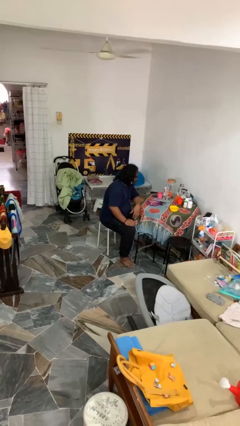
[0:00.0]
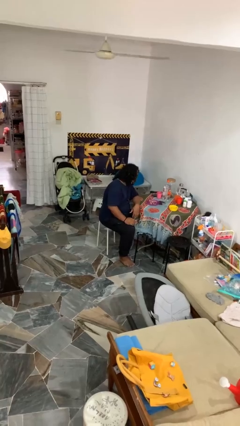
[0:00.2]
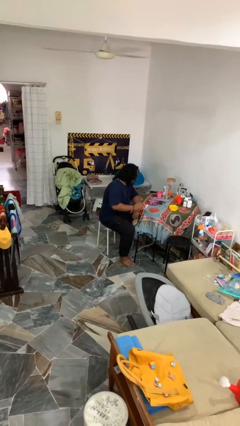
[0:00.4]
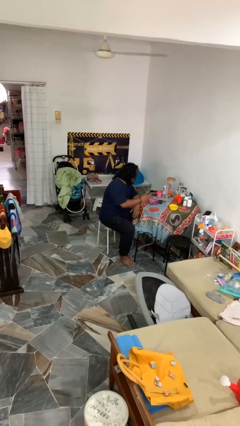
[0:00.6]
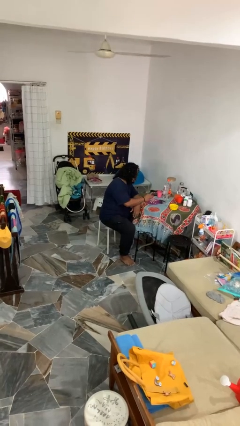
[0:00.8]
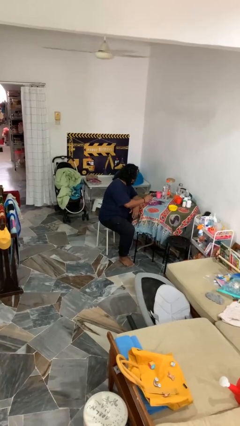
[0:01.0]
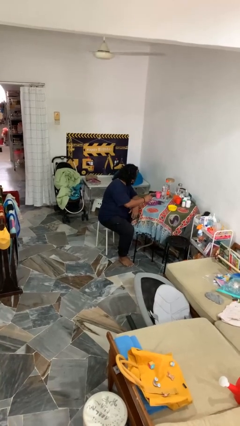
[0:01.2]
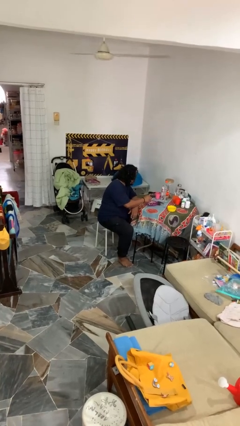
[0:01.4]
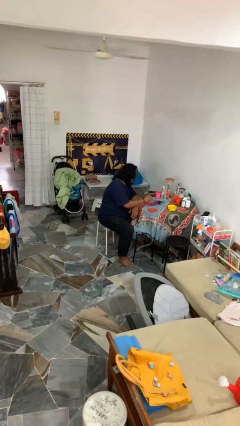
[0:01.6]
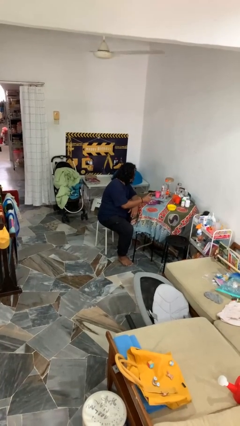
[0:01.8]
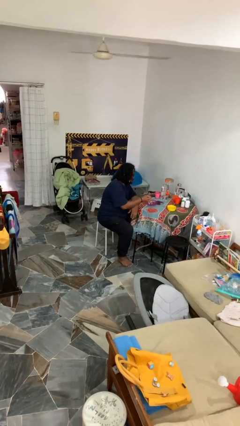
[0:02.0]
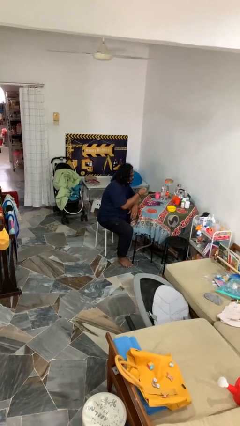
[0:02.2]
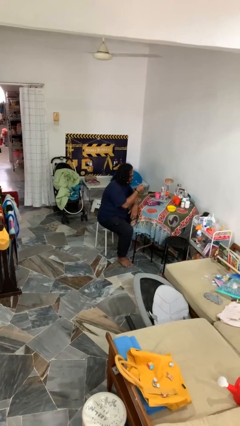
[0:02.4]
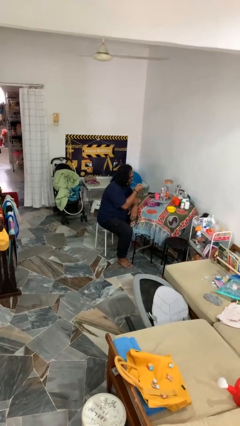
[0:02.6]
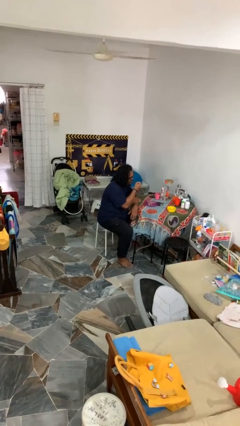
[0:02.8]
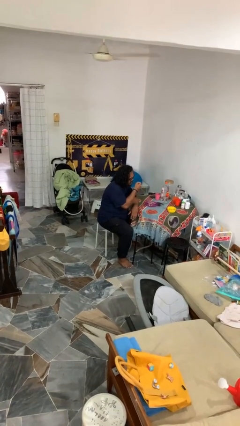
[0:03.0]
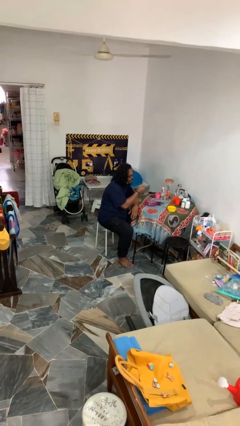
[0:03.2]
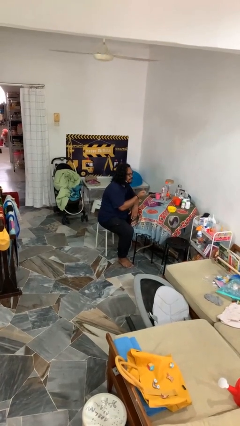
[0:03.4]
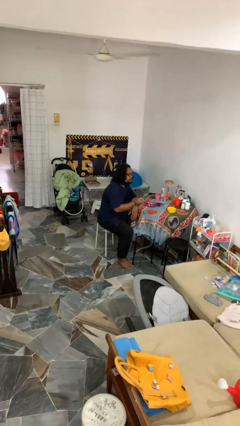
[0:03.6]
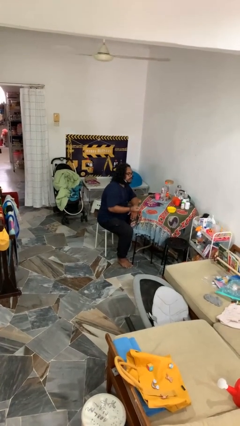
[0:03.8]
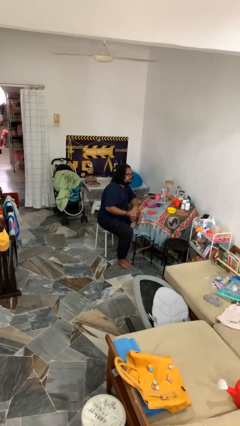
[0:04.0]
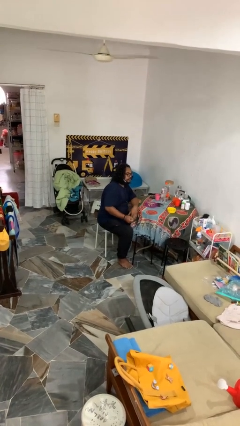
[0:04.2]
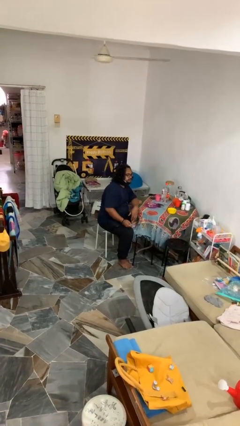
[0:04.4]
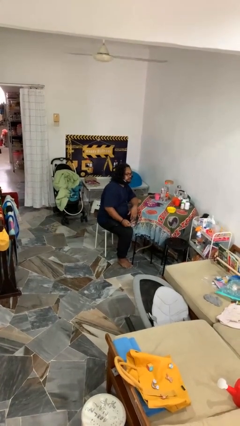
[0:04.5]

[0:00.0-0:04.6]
person eats with utensil

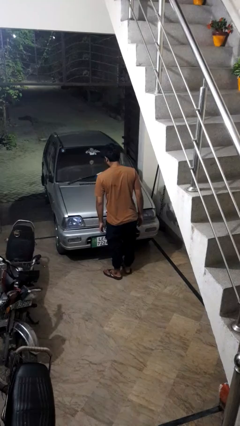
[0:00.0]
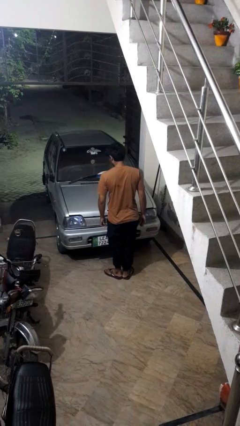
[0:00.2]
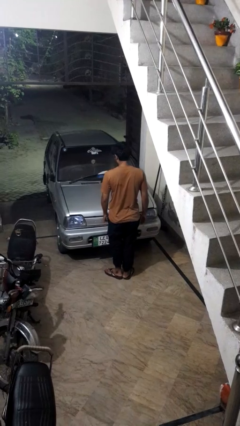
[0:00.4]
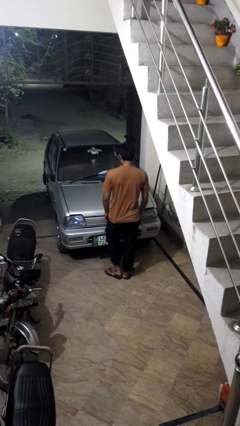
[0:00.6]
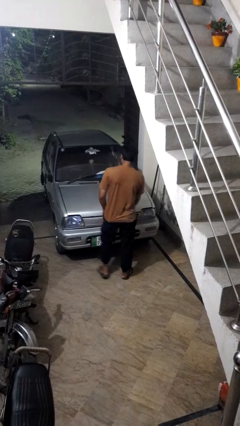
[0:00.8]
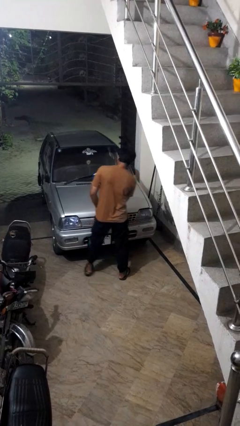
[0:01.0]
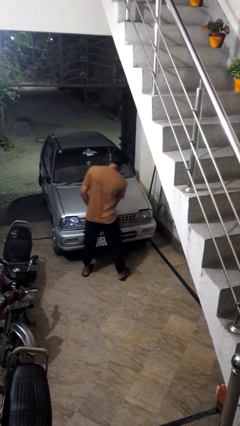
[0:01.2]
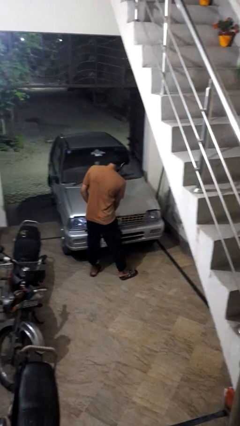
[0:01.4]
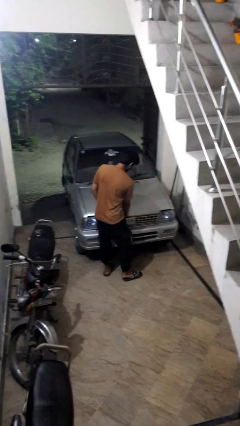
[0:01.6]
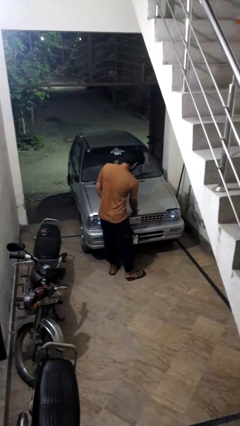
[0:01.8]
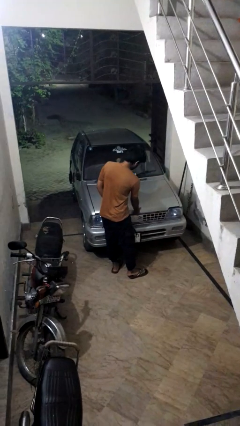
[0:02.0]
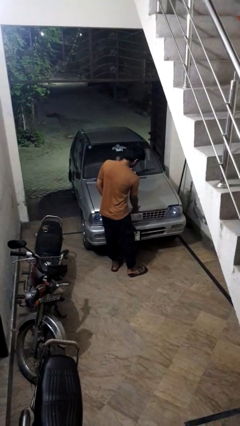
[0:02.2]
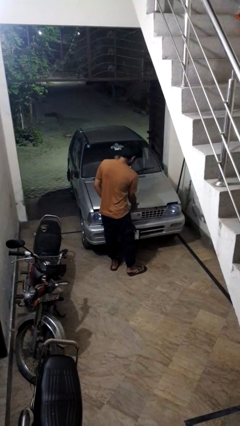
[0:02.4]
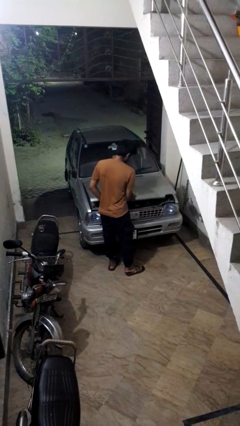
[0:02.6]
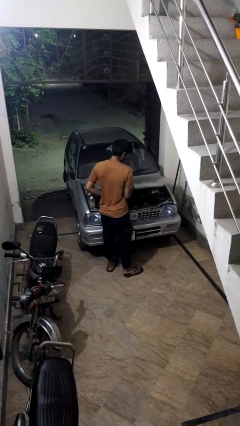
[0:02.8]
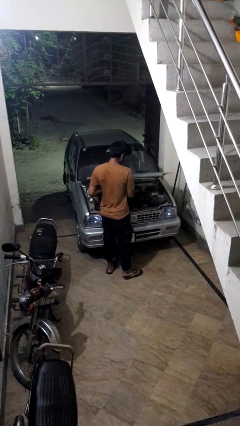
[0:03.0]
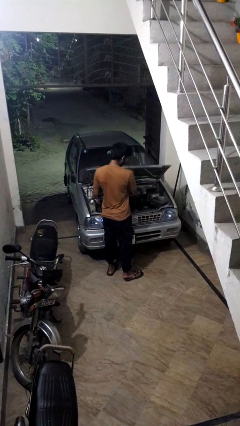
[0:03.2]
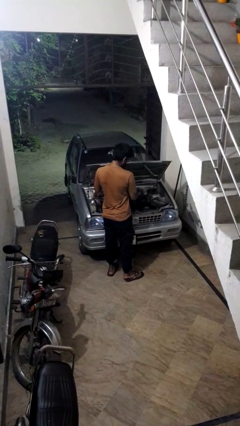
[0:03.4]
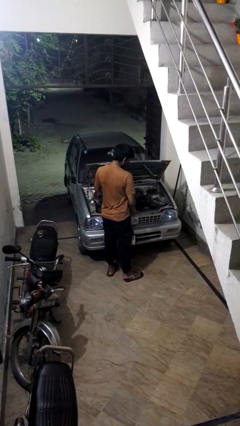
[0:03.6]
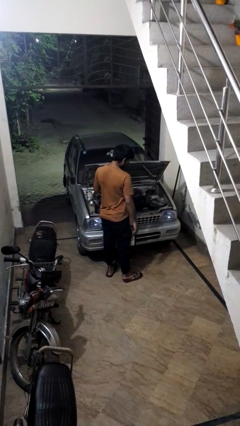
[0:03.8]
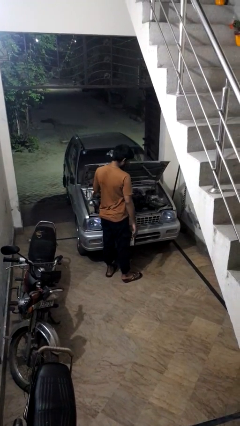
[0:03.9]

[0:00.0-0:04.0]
person opens car hood

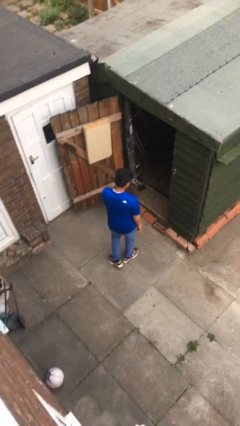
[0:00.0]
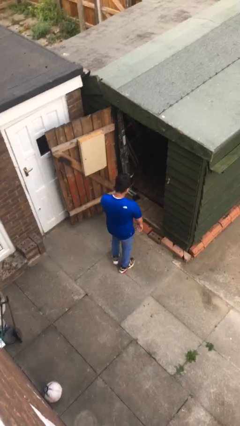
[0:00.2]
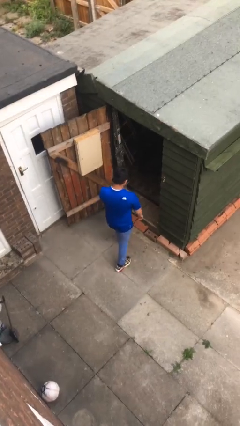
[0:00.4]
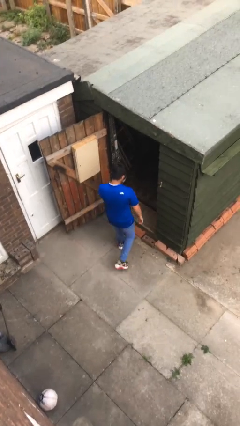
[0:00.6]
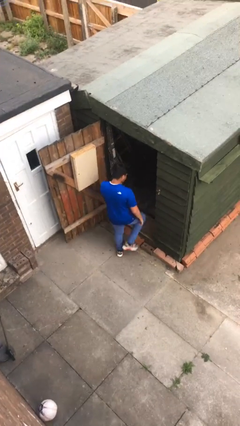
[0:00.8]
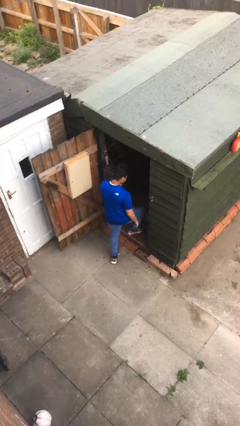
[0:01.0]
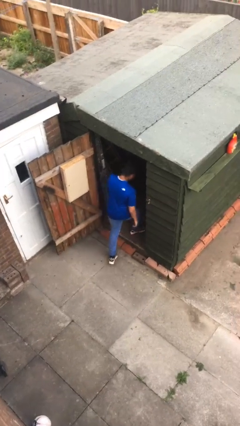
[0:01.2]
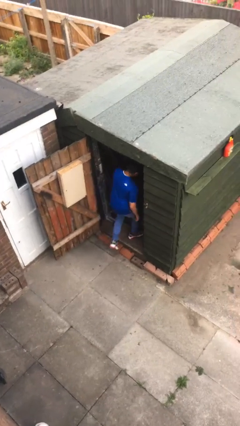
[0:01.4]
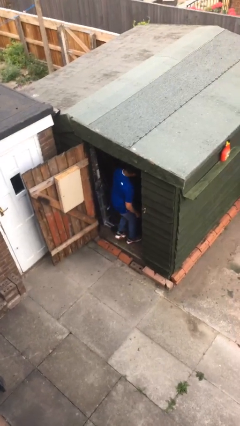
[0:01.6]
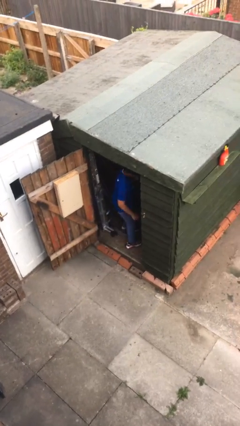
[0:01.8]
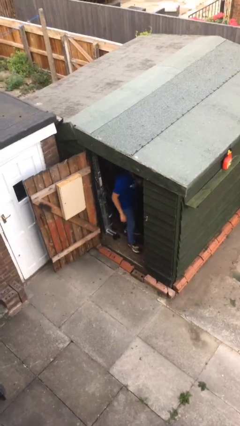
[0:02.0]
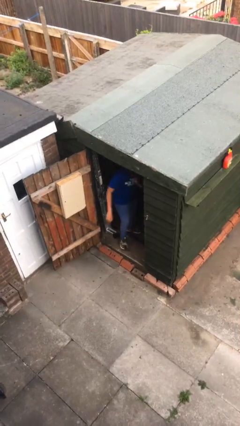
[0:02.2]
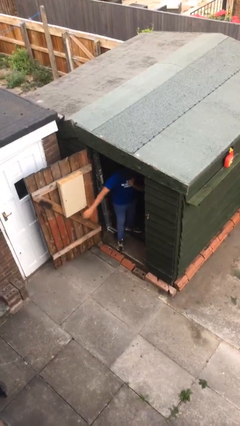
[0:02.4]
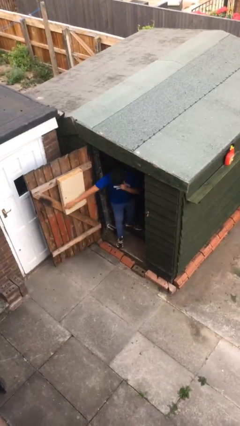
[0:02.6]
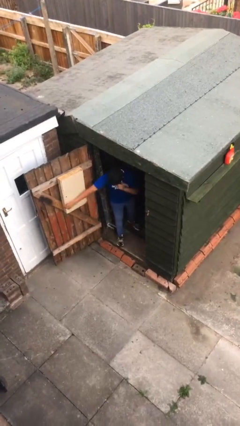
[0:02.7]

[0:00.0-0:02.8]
person exits scene through structure

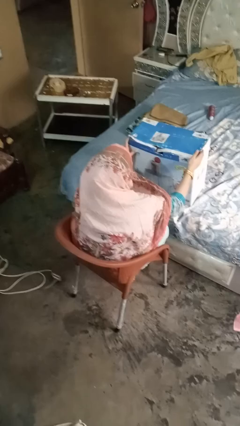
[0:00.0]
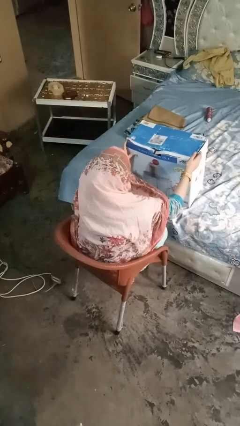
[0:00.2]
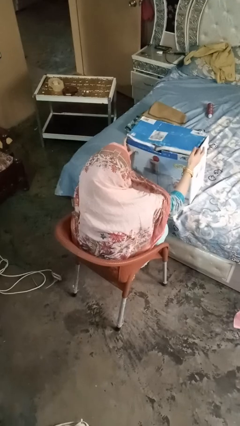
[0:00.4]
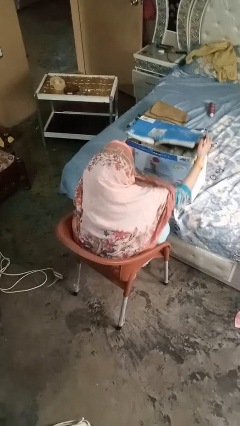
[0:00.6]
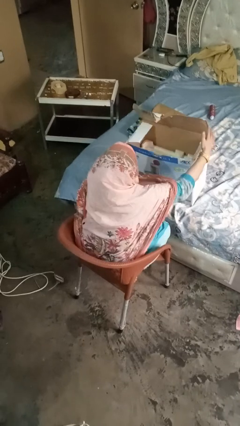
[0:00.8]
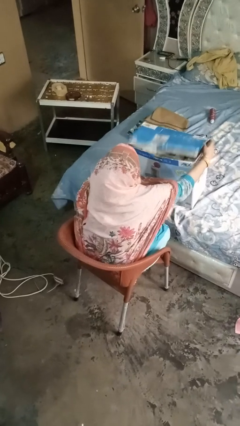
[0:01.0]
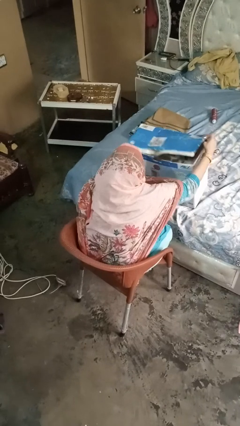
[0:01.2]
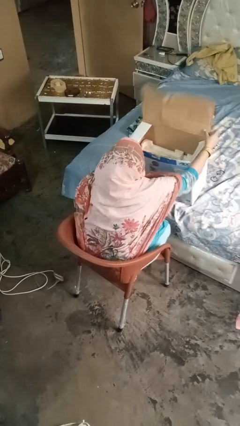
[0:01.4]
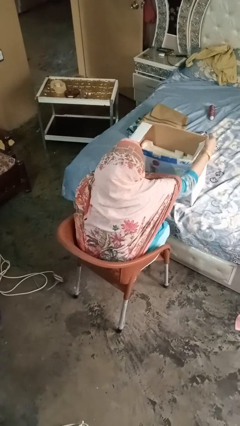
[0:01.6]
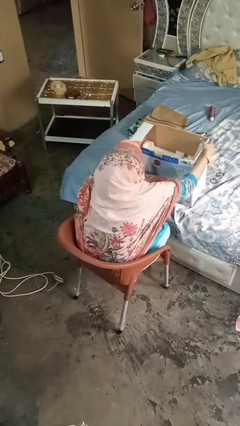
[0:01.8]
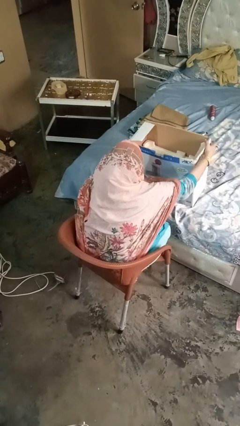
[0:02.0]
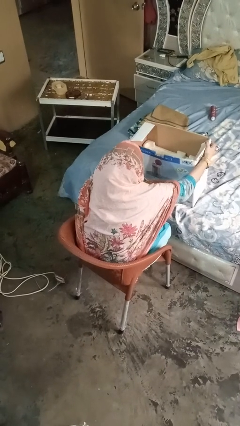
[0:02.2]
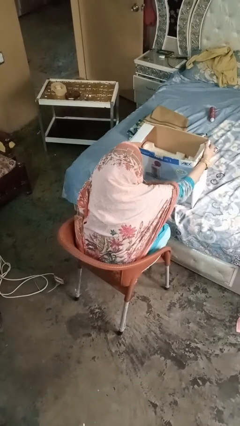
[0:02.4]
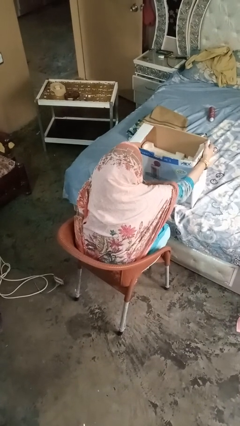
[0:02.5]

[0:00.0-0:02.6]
person opens box

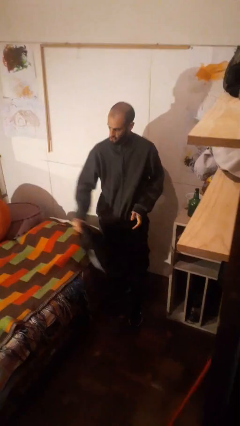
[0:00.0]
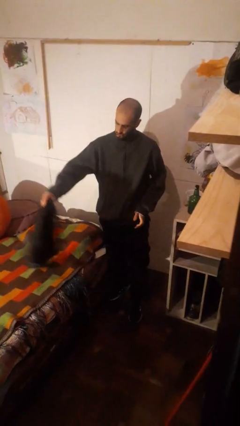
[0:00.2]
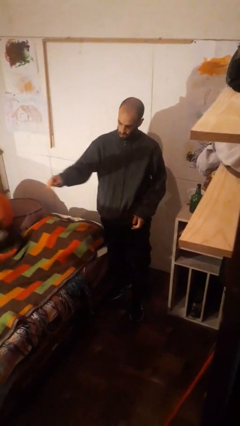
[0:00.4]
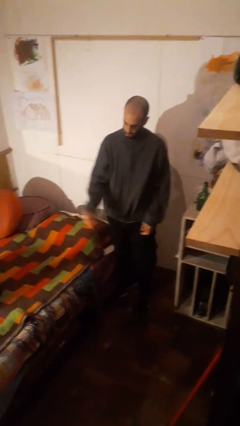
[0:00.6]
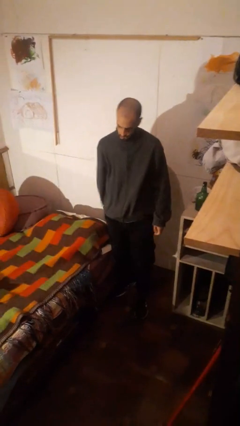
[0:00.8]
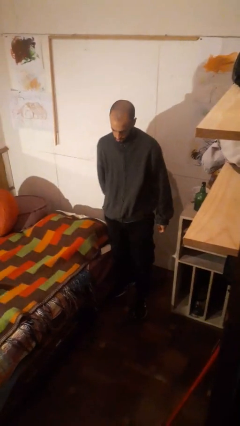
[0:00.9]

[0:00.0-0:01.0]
person throws object on bed

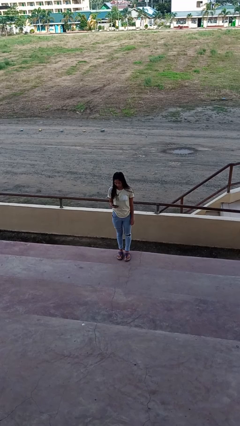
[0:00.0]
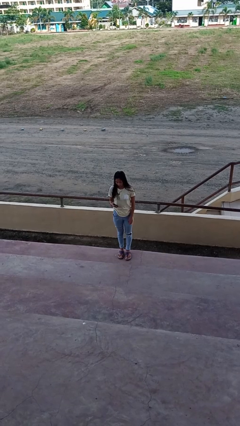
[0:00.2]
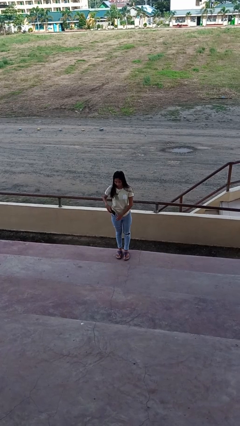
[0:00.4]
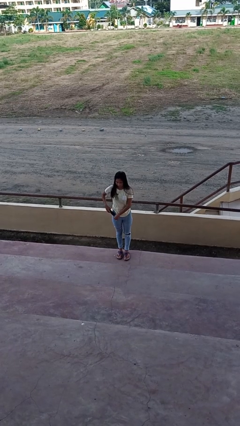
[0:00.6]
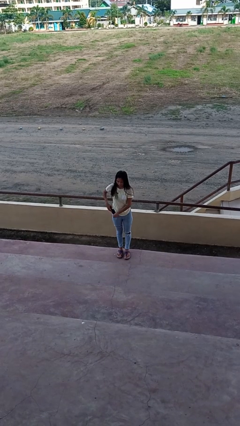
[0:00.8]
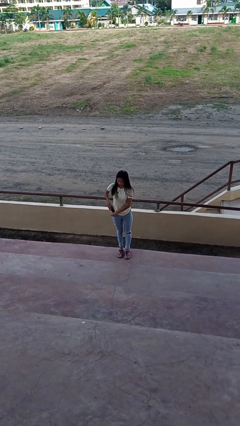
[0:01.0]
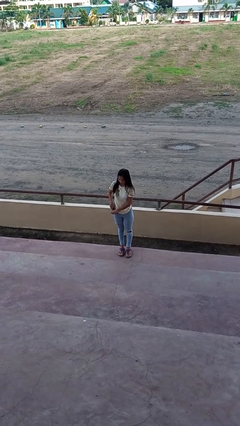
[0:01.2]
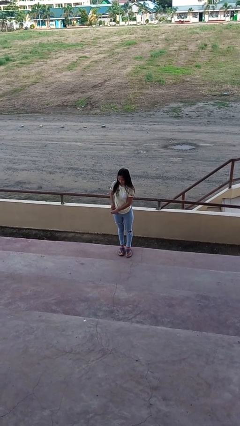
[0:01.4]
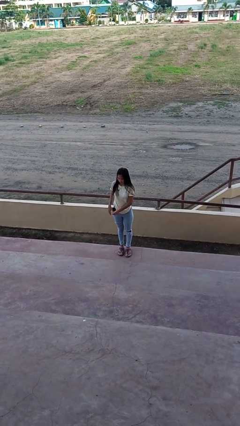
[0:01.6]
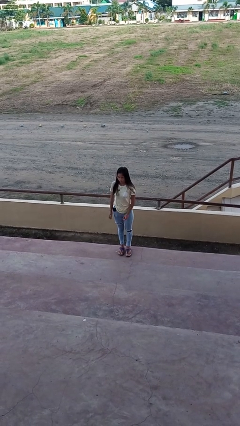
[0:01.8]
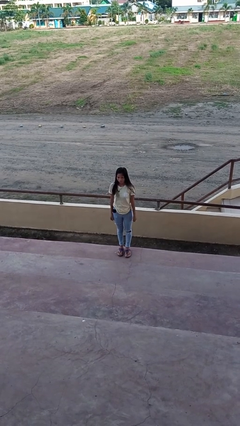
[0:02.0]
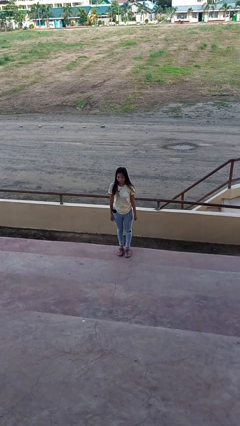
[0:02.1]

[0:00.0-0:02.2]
person puts phone into pocket
